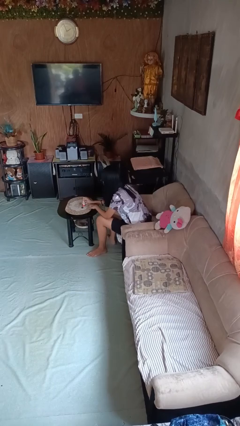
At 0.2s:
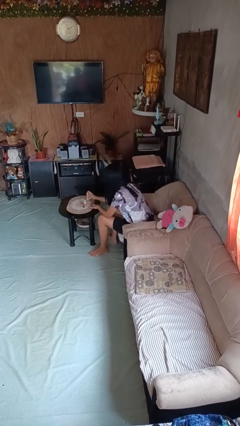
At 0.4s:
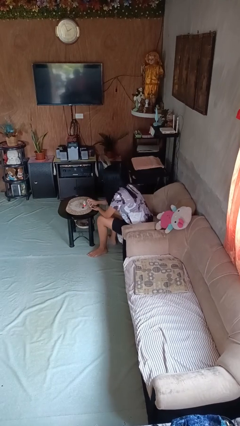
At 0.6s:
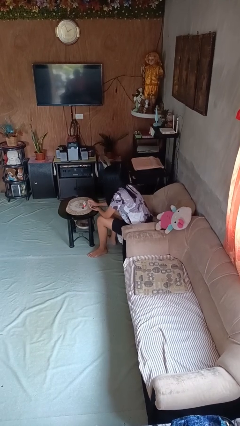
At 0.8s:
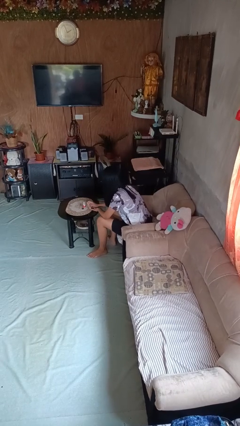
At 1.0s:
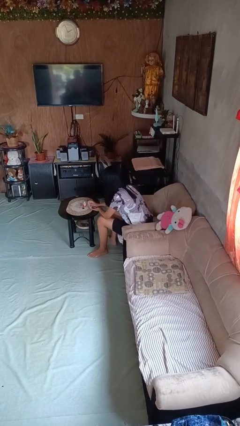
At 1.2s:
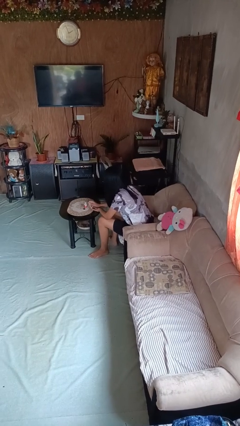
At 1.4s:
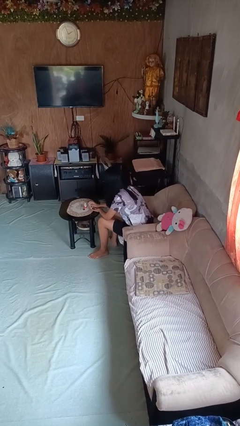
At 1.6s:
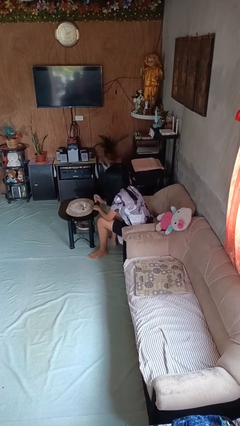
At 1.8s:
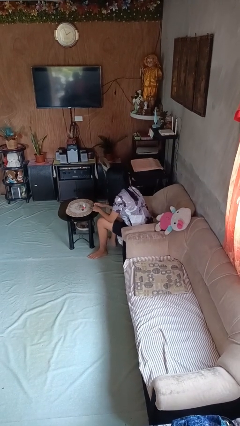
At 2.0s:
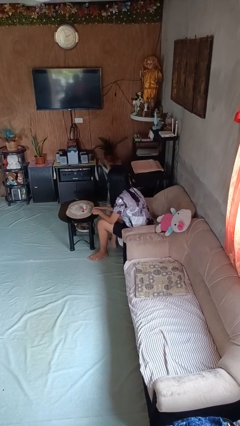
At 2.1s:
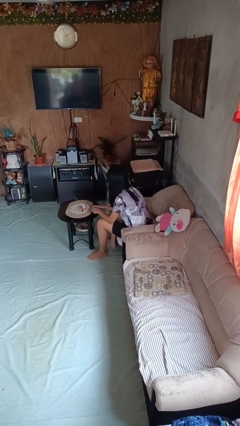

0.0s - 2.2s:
person paints fingernails

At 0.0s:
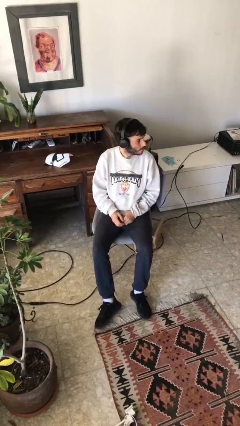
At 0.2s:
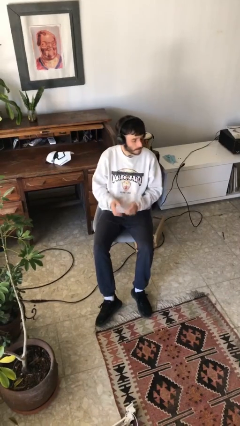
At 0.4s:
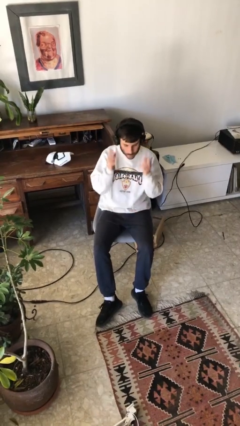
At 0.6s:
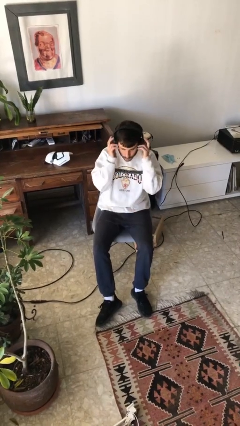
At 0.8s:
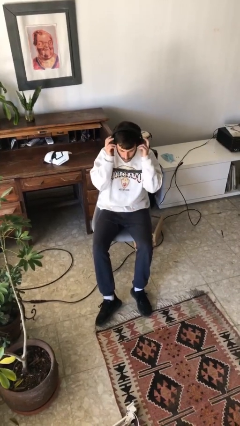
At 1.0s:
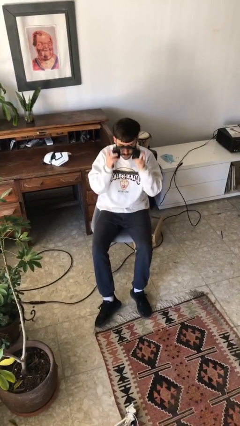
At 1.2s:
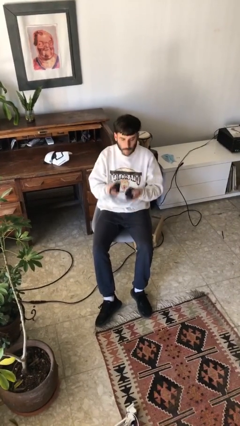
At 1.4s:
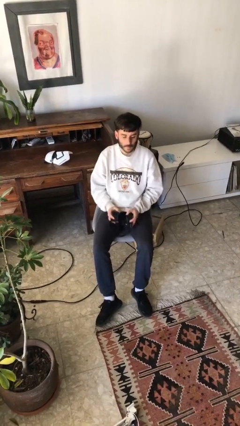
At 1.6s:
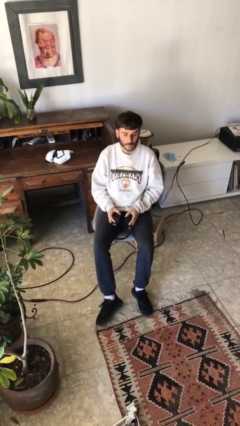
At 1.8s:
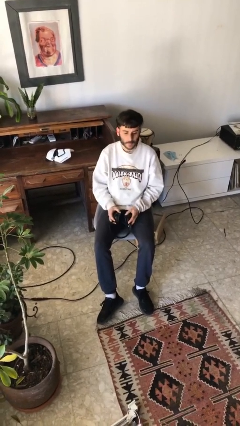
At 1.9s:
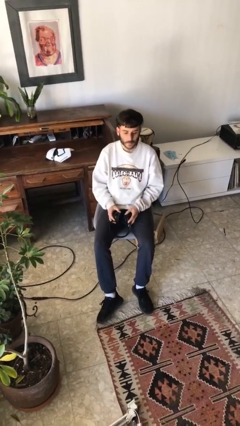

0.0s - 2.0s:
person takes off headphones

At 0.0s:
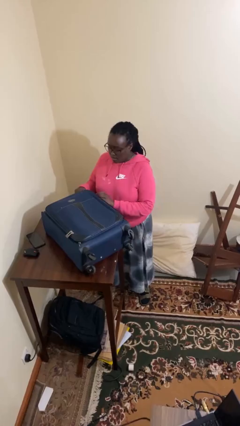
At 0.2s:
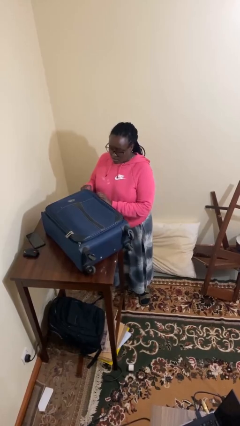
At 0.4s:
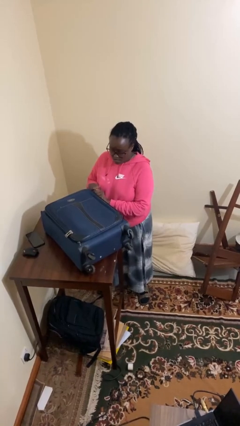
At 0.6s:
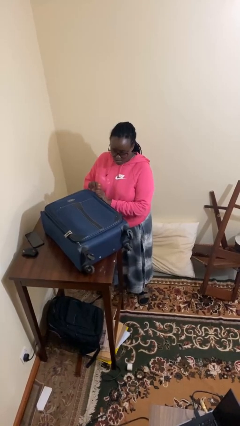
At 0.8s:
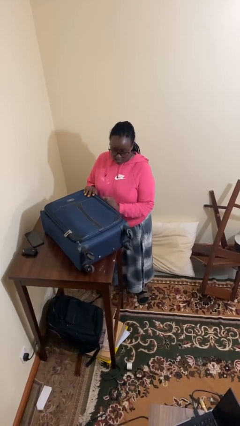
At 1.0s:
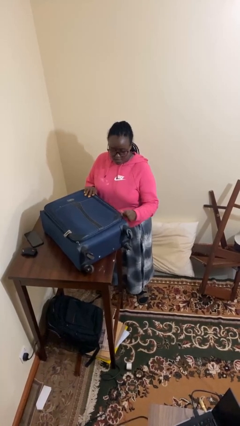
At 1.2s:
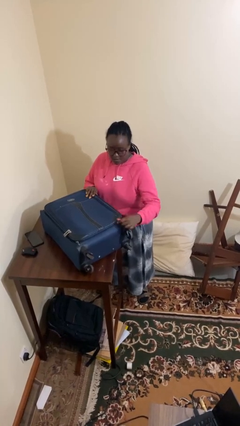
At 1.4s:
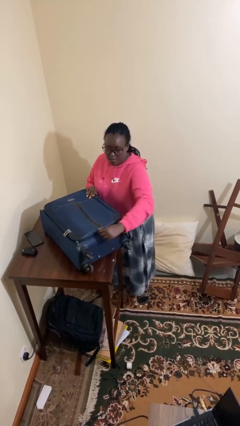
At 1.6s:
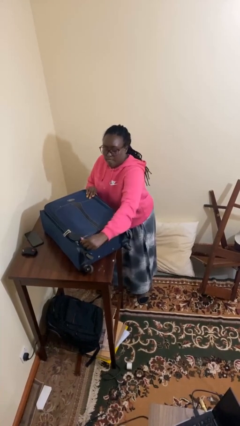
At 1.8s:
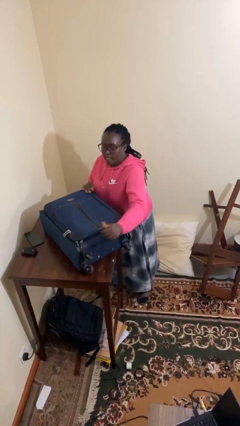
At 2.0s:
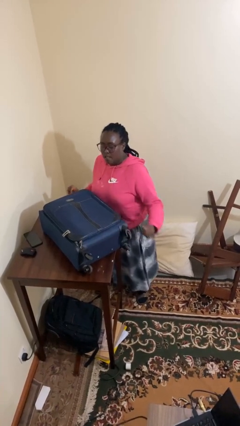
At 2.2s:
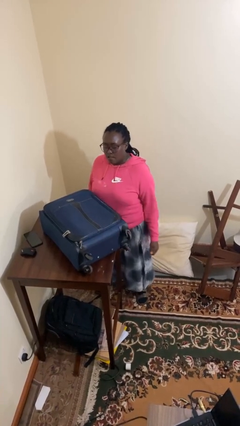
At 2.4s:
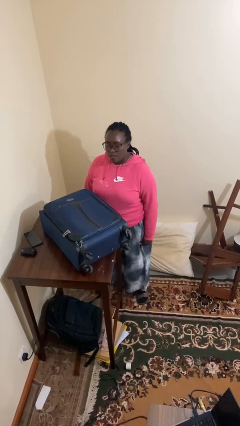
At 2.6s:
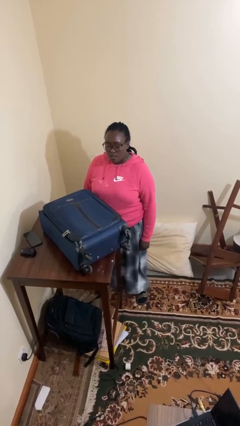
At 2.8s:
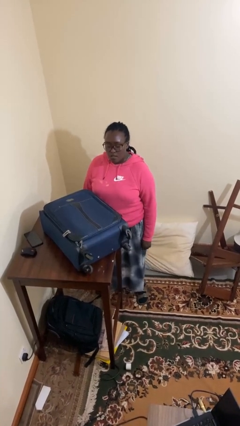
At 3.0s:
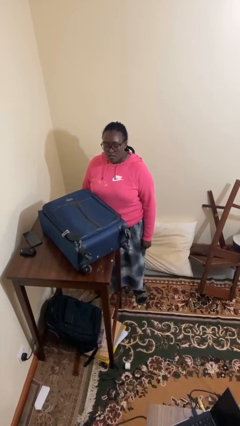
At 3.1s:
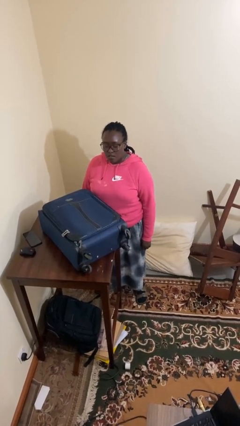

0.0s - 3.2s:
person closes suitcase

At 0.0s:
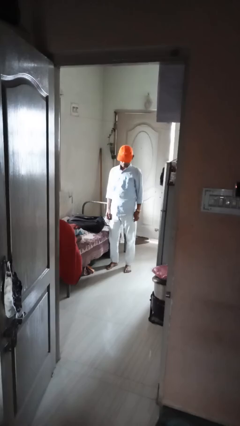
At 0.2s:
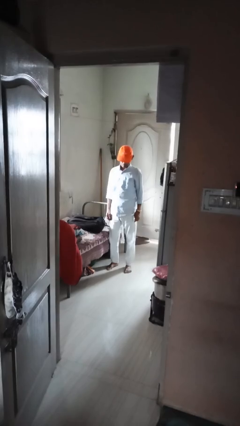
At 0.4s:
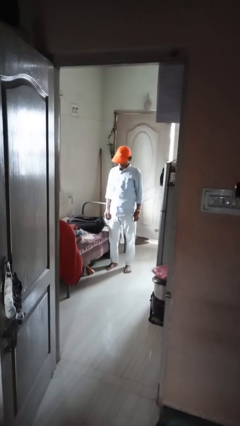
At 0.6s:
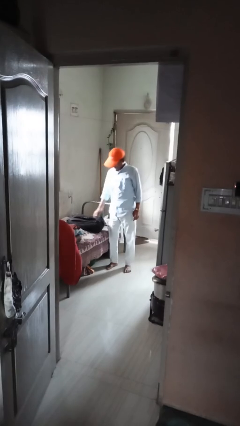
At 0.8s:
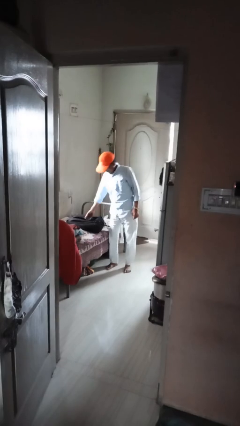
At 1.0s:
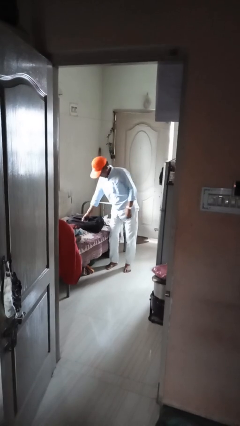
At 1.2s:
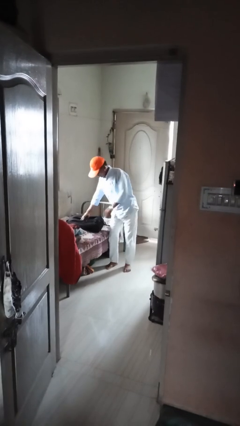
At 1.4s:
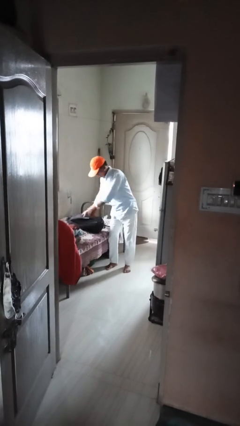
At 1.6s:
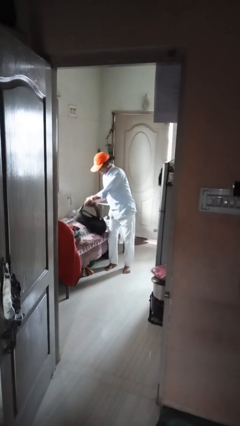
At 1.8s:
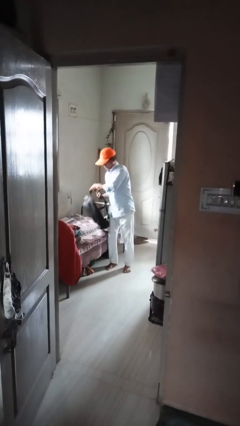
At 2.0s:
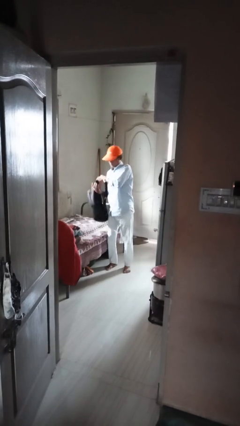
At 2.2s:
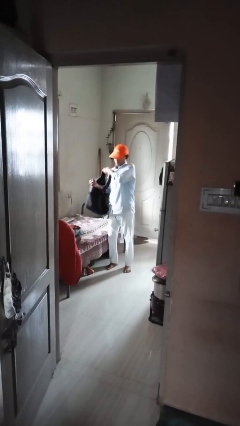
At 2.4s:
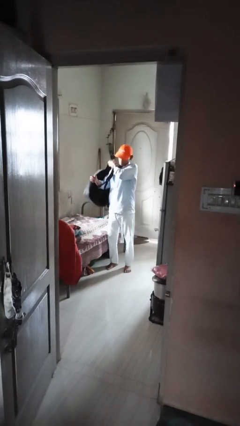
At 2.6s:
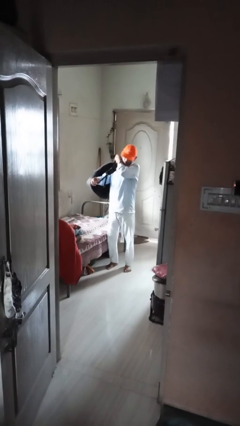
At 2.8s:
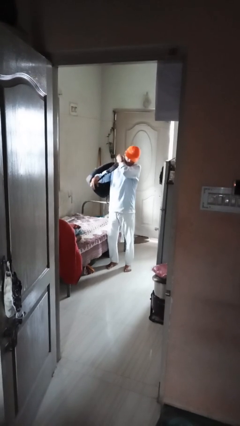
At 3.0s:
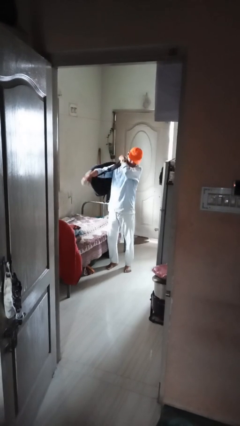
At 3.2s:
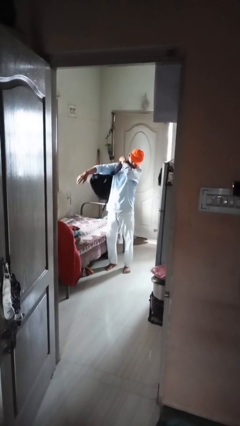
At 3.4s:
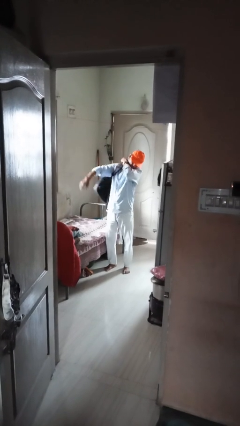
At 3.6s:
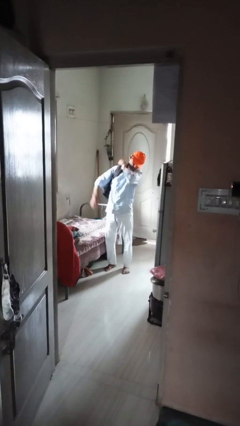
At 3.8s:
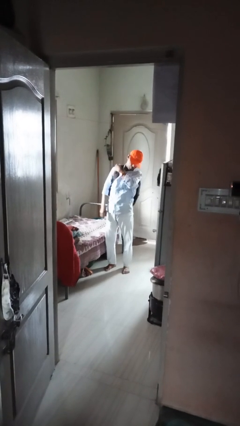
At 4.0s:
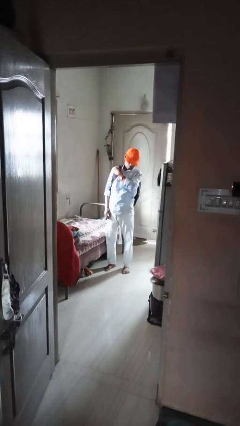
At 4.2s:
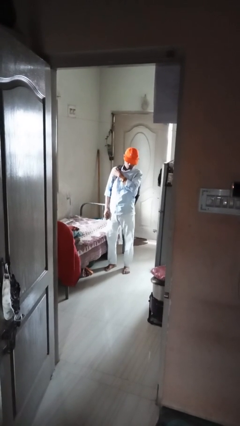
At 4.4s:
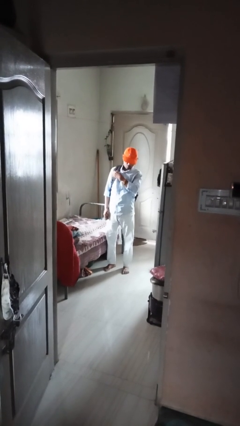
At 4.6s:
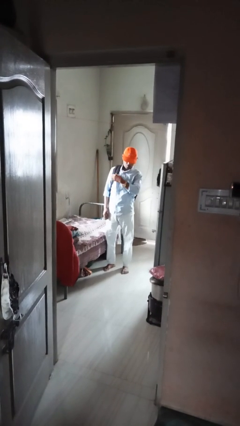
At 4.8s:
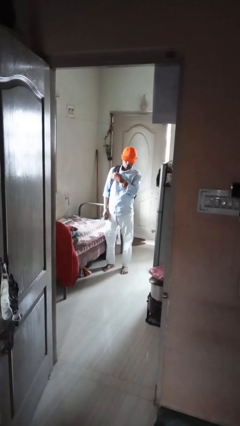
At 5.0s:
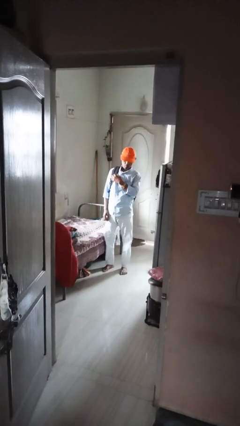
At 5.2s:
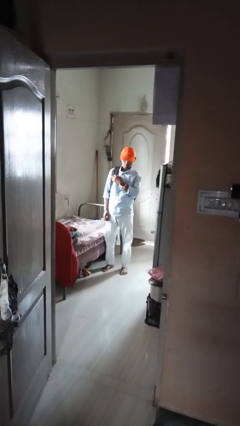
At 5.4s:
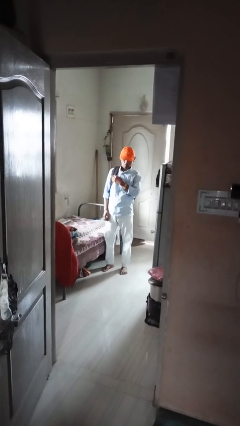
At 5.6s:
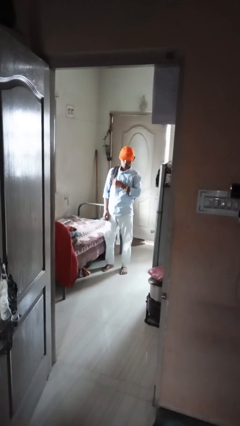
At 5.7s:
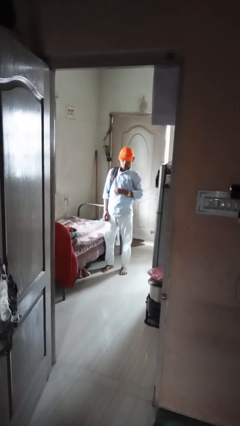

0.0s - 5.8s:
person puts on backpack

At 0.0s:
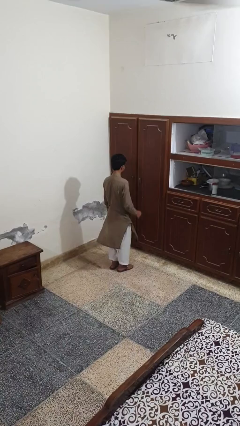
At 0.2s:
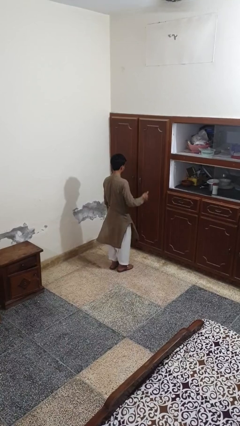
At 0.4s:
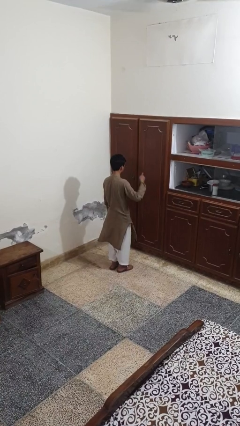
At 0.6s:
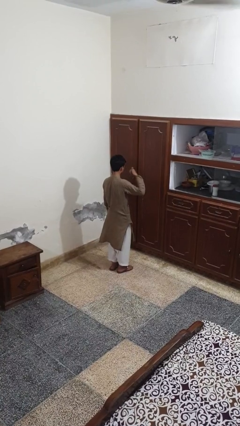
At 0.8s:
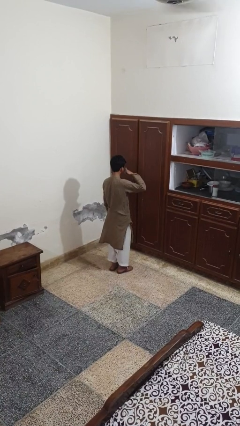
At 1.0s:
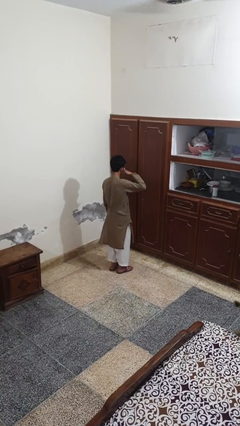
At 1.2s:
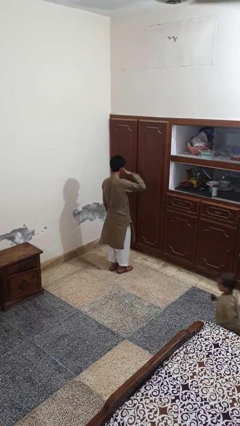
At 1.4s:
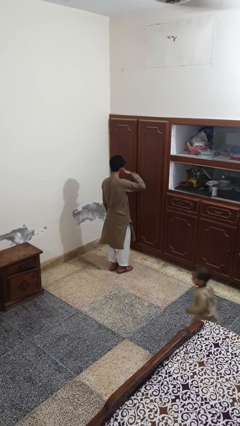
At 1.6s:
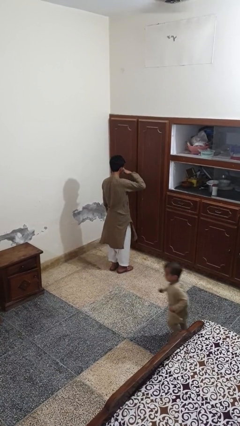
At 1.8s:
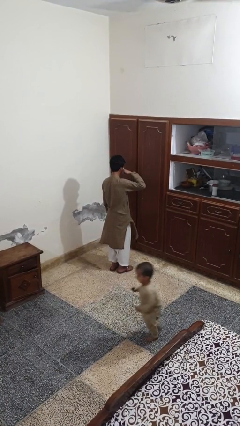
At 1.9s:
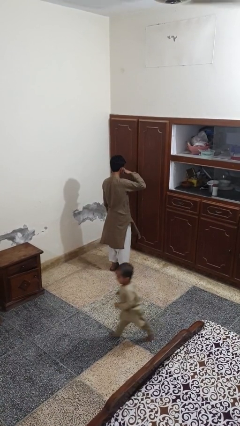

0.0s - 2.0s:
person gestures call me

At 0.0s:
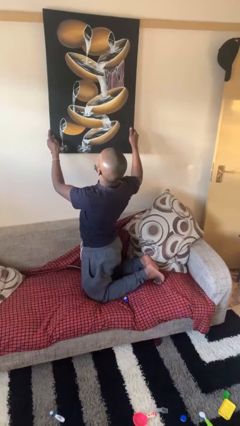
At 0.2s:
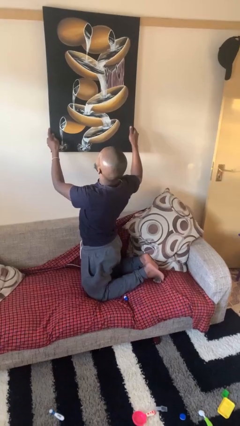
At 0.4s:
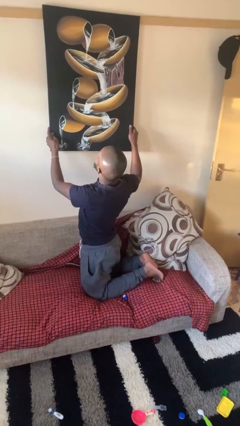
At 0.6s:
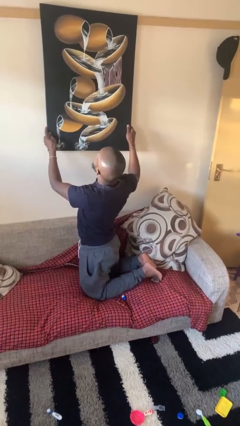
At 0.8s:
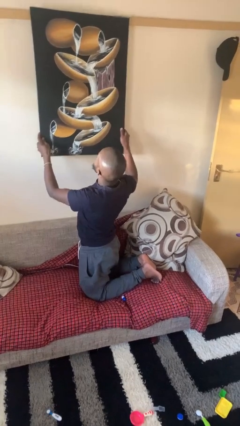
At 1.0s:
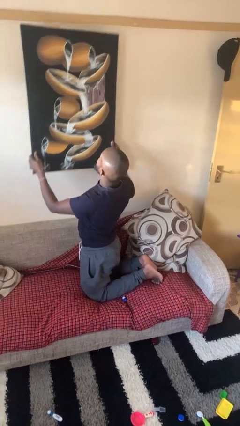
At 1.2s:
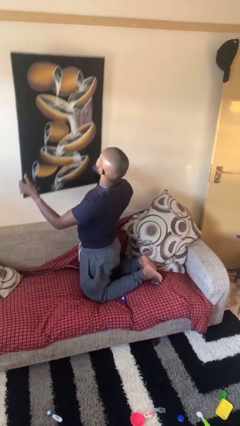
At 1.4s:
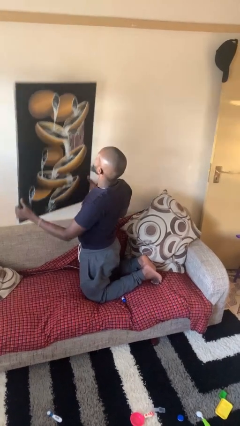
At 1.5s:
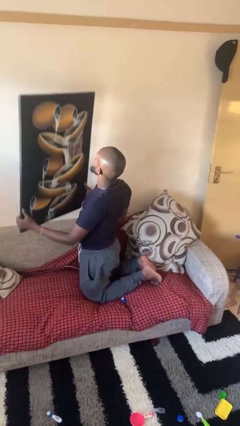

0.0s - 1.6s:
person takes down picture frame

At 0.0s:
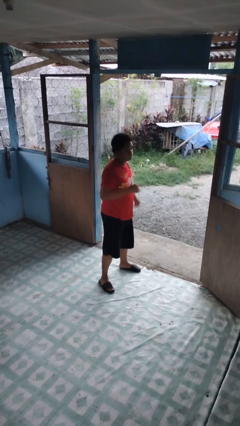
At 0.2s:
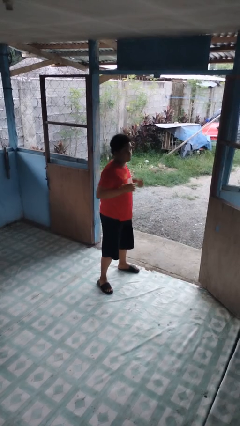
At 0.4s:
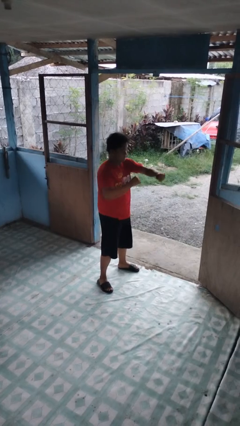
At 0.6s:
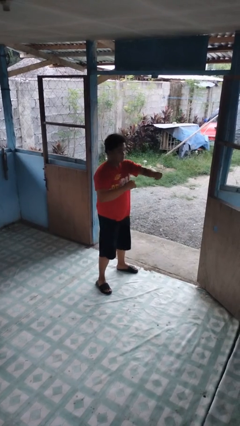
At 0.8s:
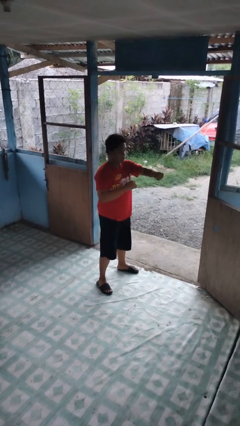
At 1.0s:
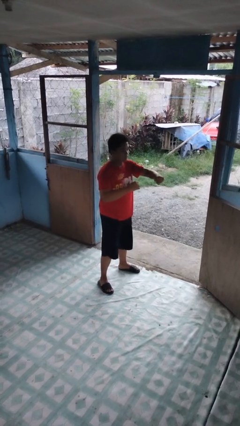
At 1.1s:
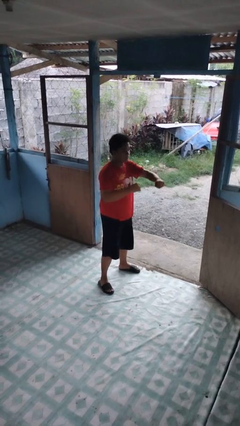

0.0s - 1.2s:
person punches
